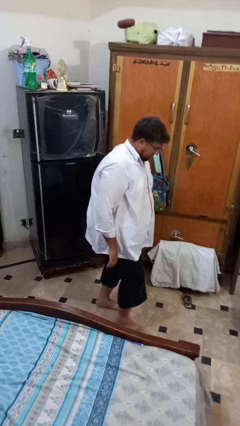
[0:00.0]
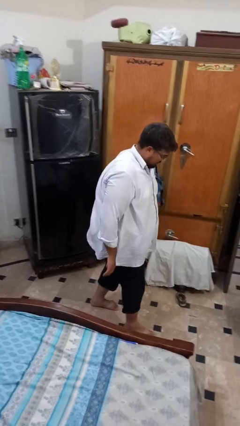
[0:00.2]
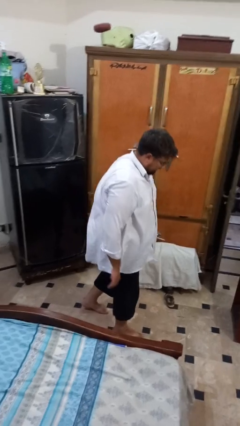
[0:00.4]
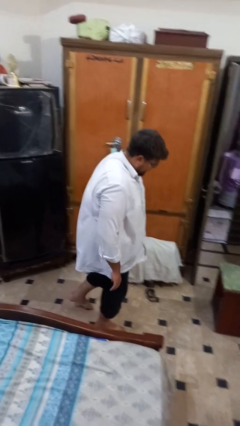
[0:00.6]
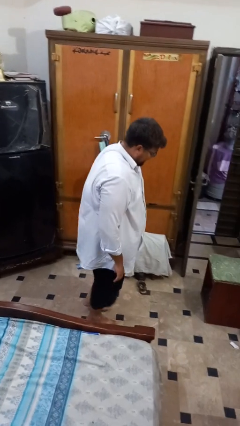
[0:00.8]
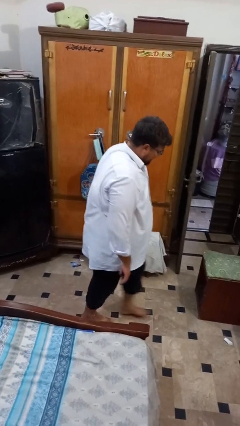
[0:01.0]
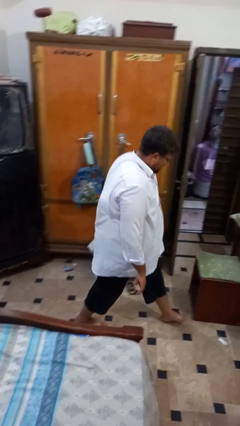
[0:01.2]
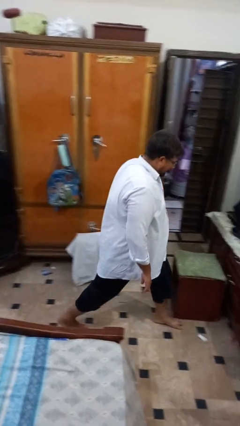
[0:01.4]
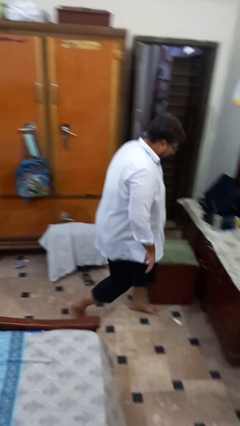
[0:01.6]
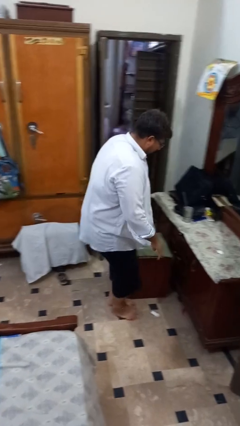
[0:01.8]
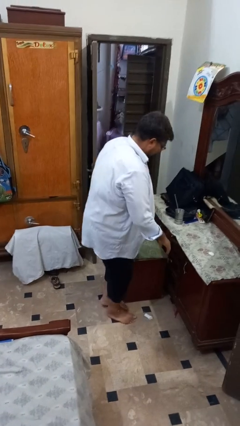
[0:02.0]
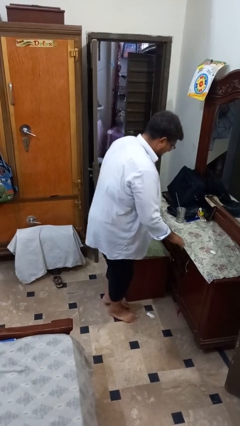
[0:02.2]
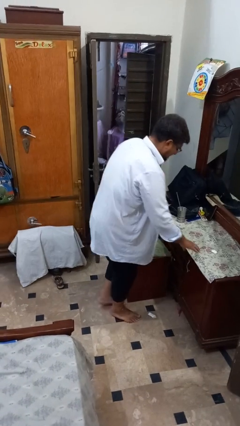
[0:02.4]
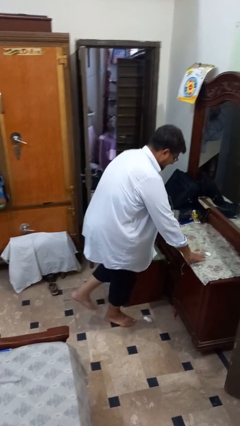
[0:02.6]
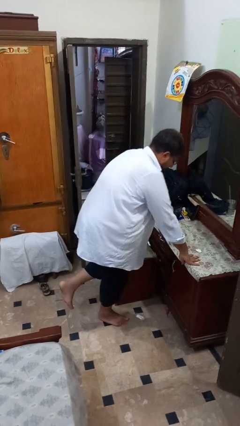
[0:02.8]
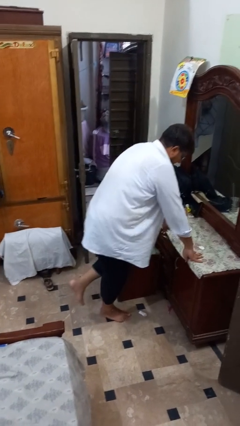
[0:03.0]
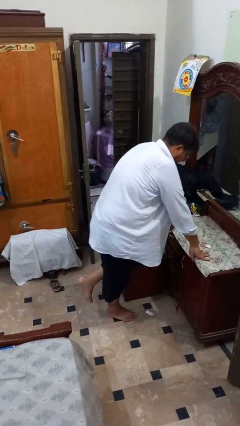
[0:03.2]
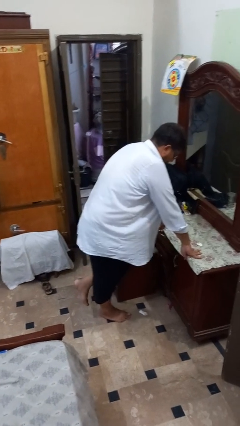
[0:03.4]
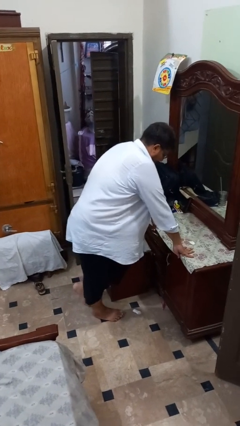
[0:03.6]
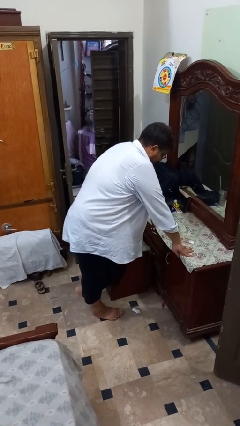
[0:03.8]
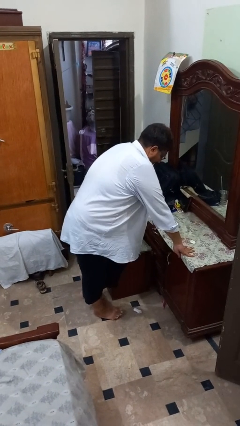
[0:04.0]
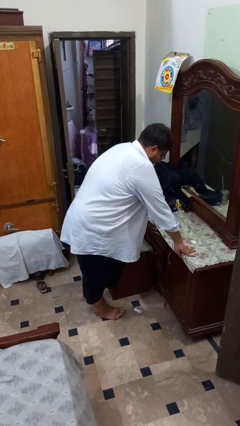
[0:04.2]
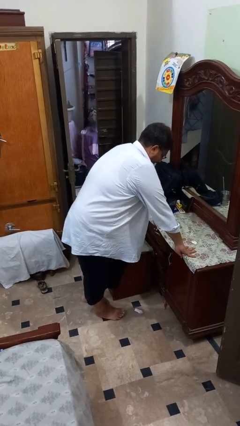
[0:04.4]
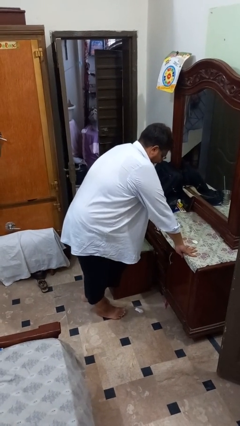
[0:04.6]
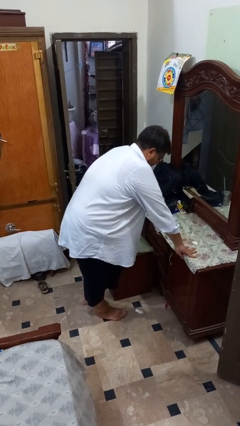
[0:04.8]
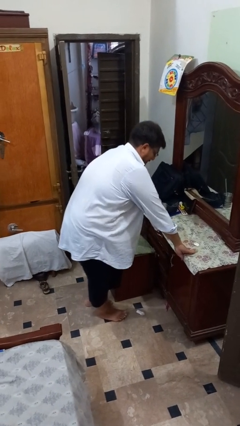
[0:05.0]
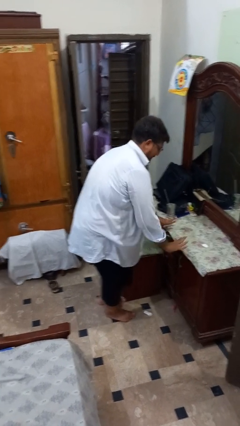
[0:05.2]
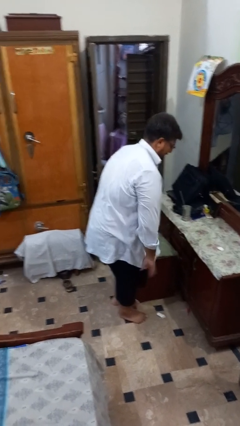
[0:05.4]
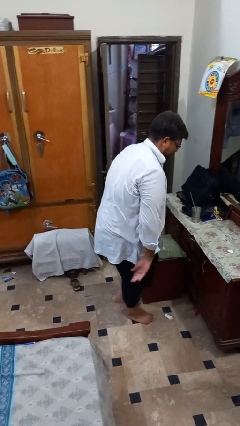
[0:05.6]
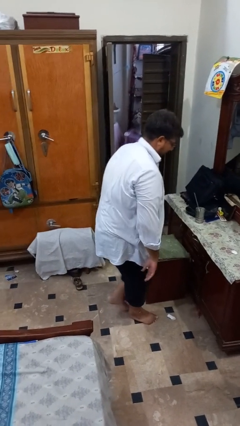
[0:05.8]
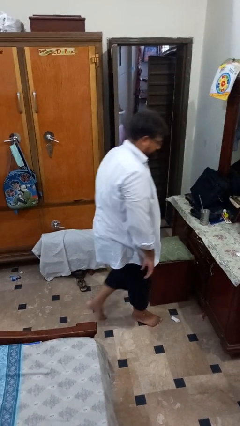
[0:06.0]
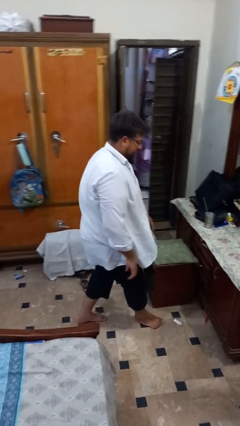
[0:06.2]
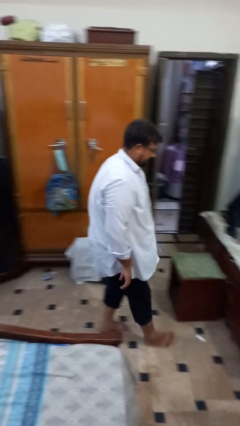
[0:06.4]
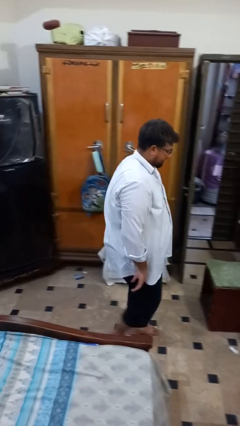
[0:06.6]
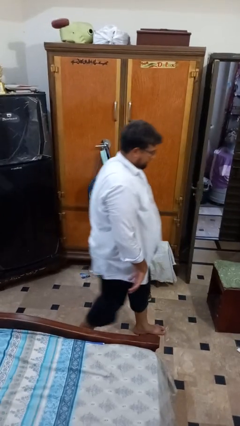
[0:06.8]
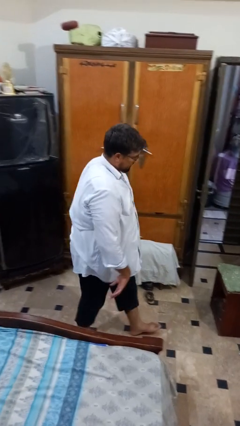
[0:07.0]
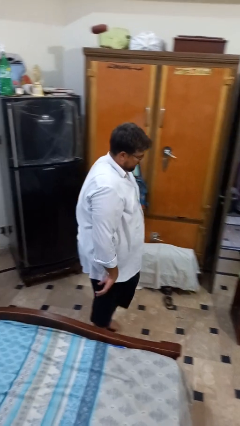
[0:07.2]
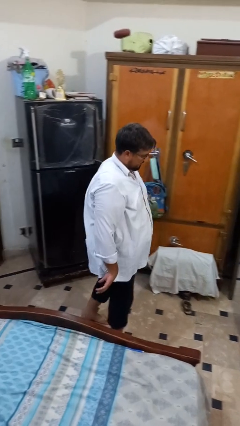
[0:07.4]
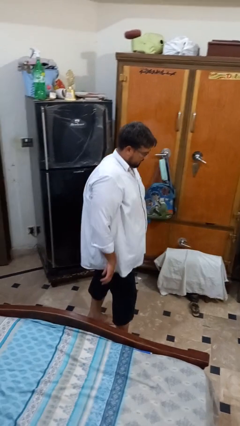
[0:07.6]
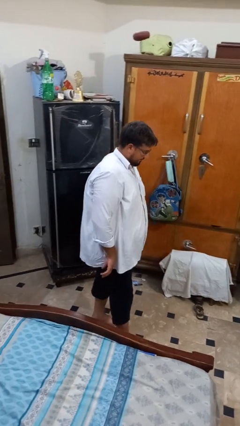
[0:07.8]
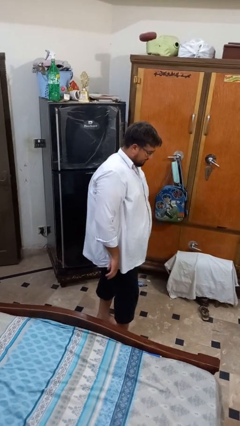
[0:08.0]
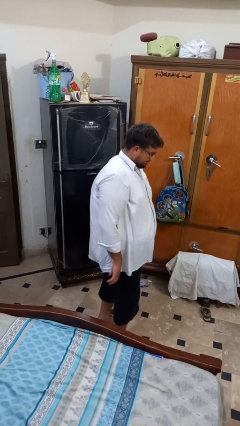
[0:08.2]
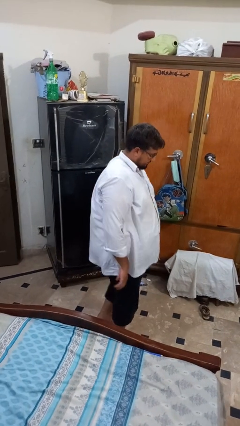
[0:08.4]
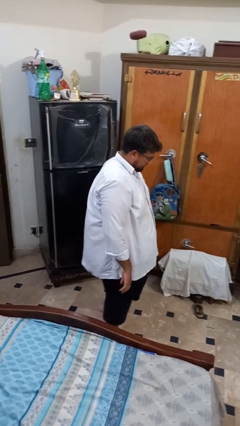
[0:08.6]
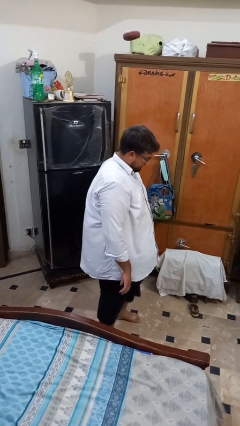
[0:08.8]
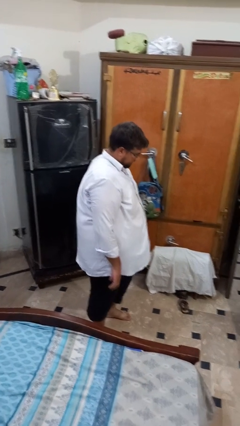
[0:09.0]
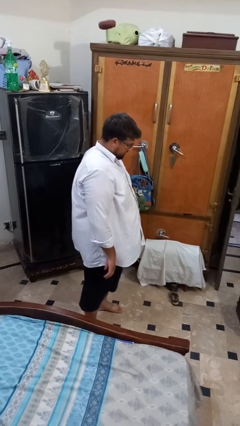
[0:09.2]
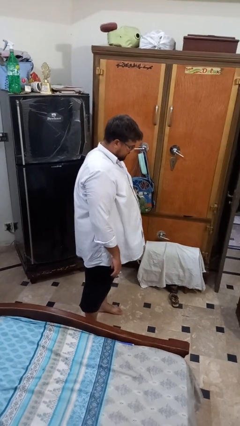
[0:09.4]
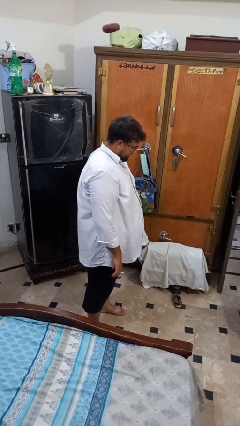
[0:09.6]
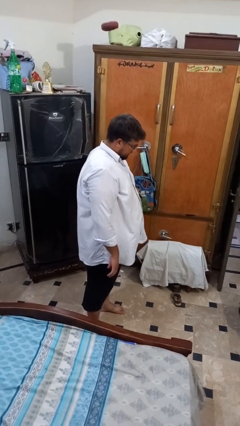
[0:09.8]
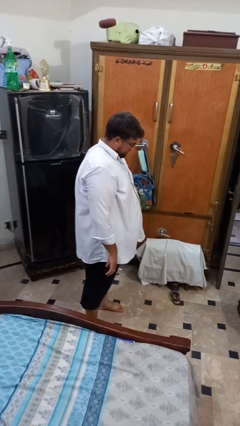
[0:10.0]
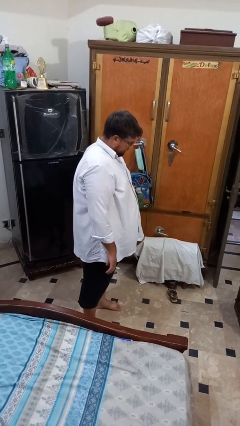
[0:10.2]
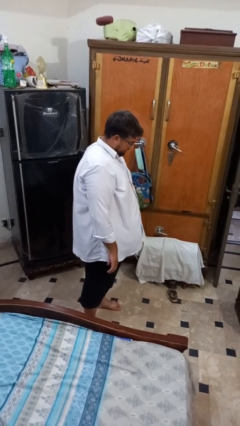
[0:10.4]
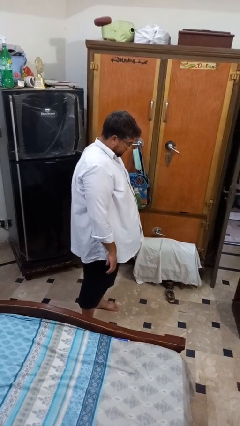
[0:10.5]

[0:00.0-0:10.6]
person bumps into table

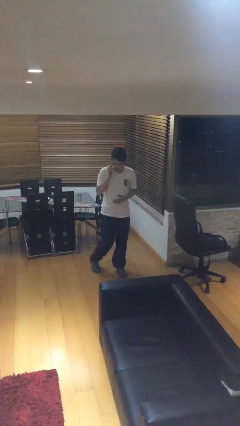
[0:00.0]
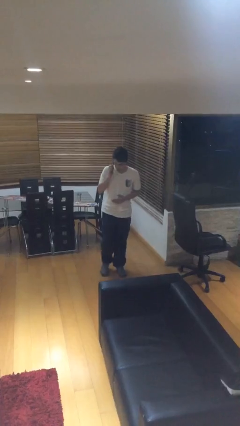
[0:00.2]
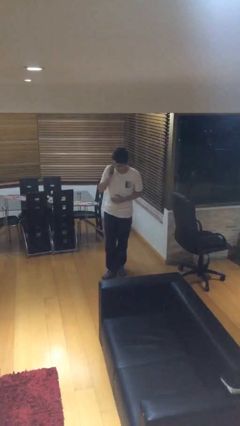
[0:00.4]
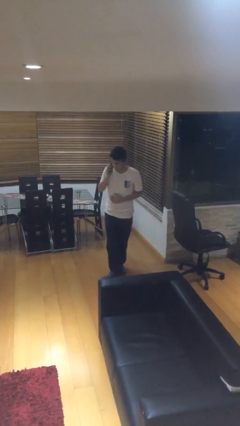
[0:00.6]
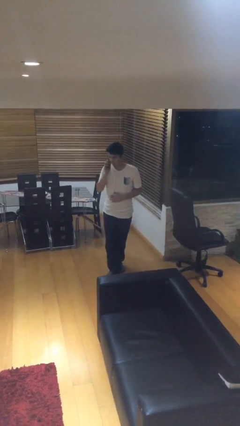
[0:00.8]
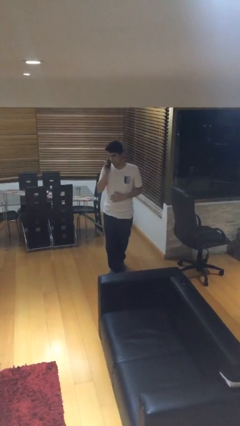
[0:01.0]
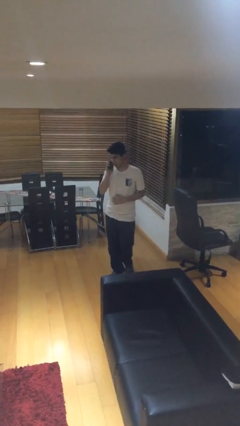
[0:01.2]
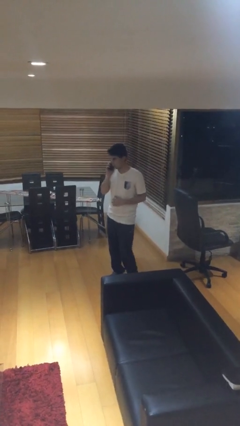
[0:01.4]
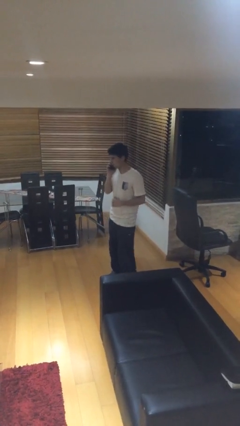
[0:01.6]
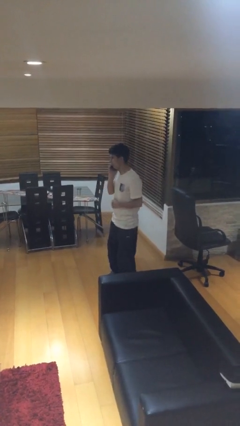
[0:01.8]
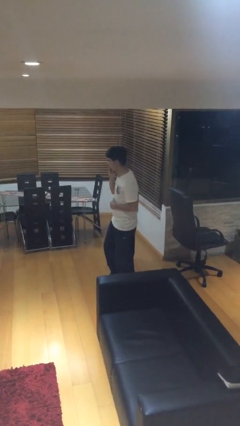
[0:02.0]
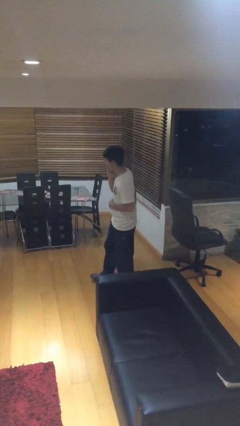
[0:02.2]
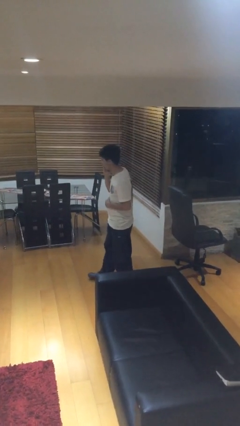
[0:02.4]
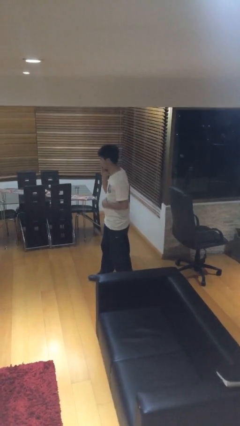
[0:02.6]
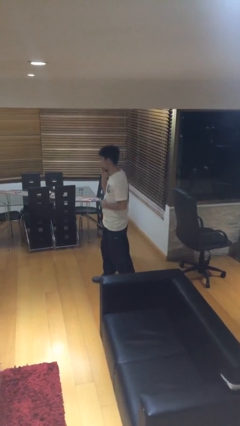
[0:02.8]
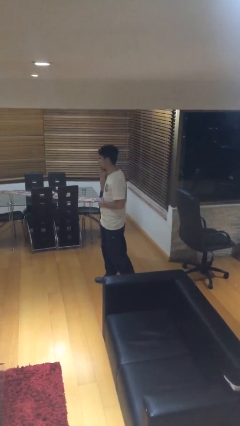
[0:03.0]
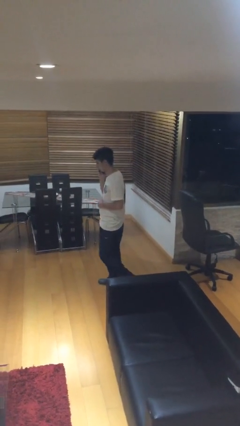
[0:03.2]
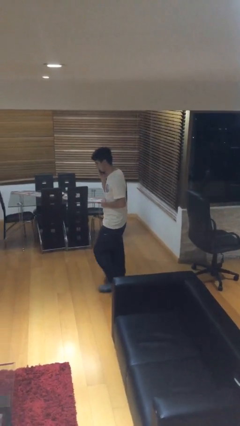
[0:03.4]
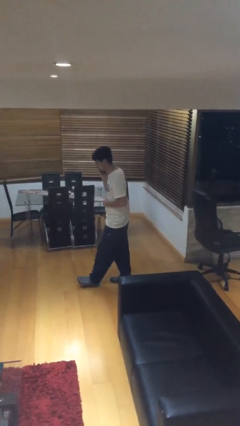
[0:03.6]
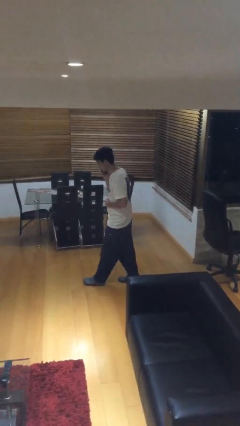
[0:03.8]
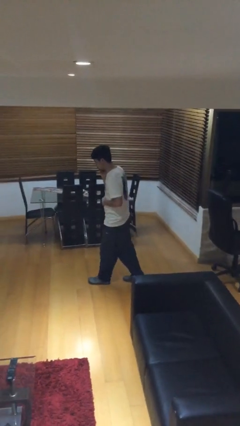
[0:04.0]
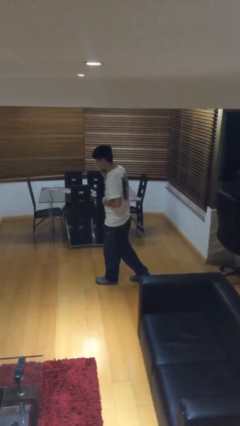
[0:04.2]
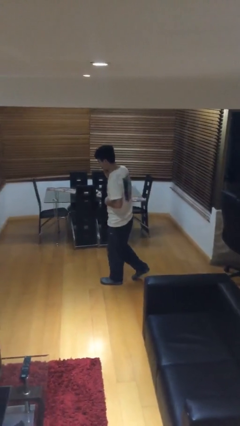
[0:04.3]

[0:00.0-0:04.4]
person talks on phone

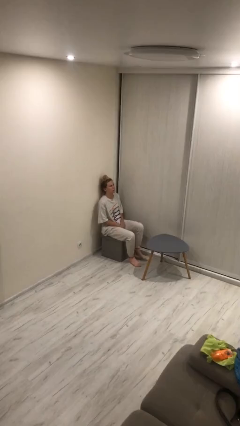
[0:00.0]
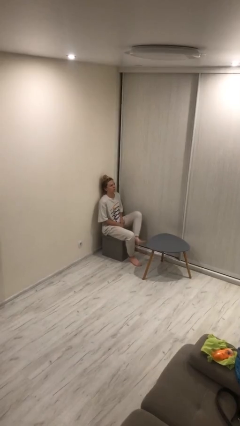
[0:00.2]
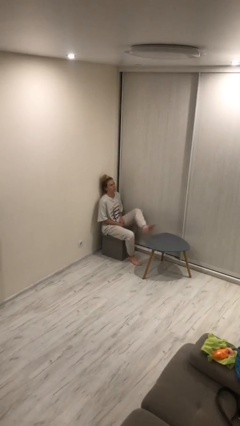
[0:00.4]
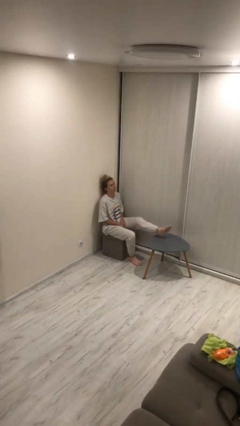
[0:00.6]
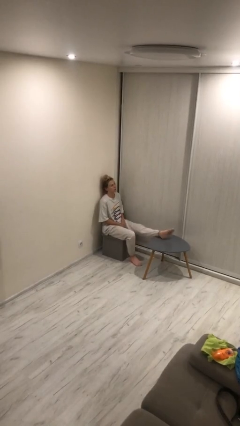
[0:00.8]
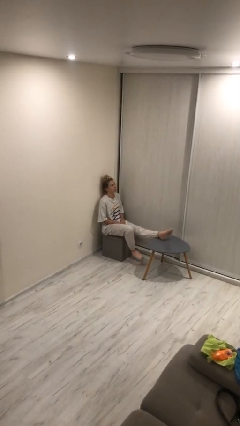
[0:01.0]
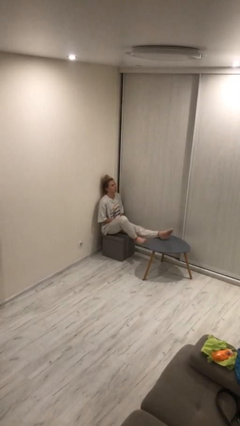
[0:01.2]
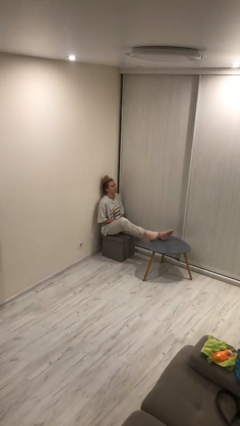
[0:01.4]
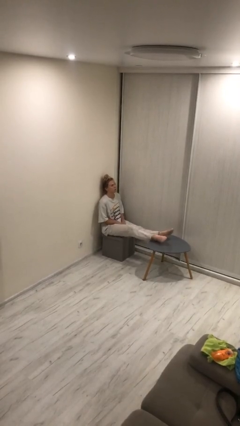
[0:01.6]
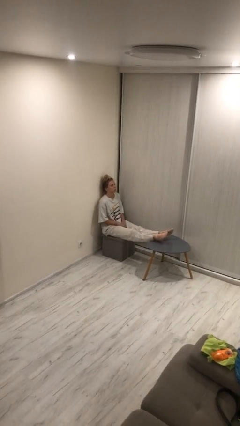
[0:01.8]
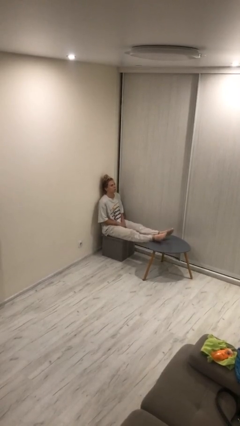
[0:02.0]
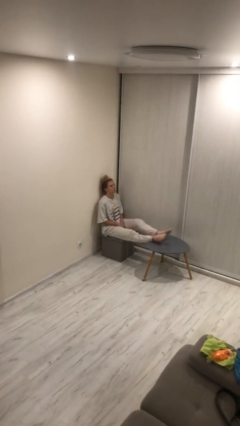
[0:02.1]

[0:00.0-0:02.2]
person puts feet up

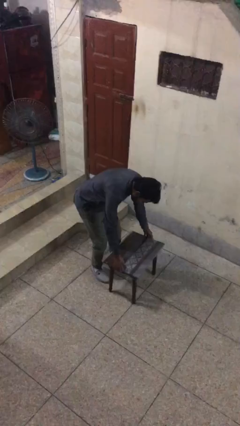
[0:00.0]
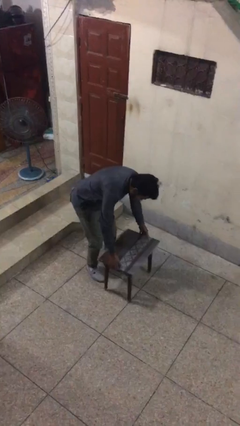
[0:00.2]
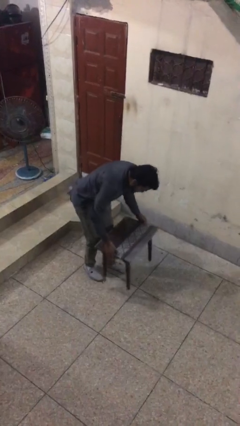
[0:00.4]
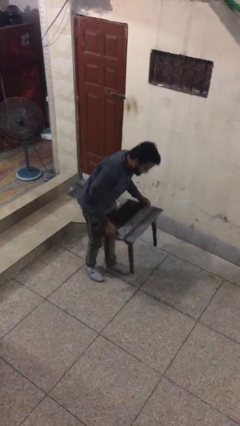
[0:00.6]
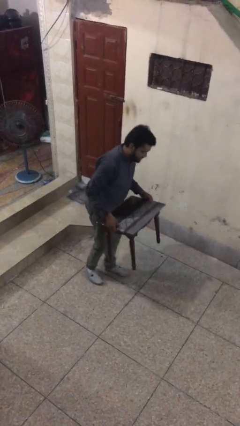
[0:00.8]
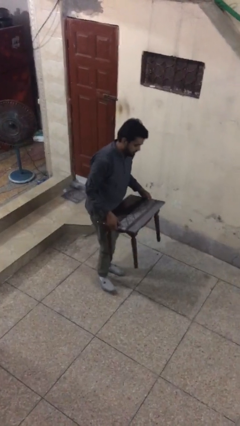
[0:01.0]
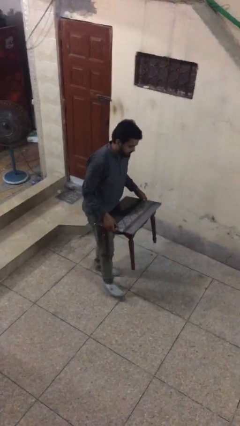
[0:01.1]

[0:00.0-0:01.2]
person picks up object from floor
